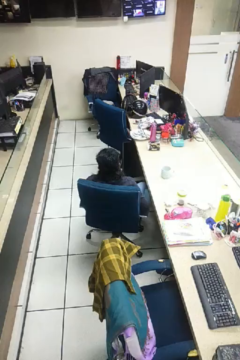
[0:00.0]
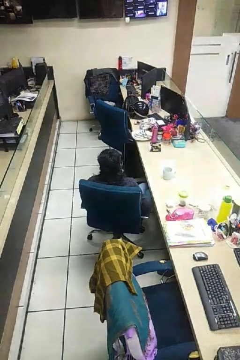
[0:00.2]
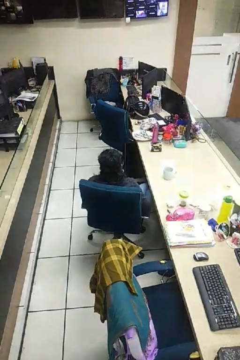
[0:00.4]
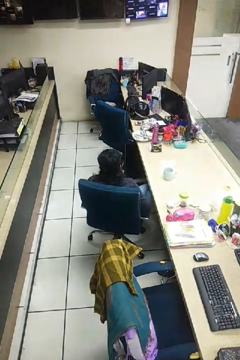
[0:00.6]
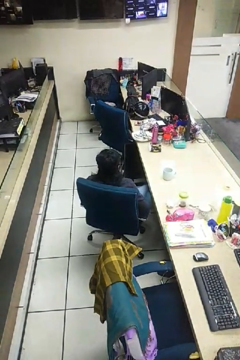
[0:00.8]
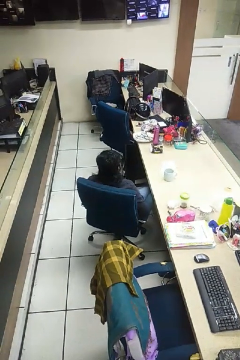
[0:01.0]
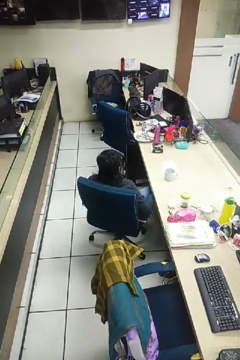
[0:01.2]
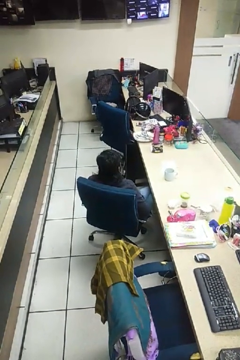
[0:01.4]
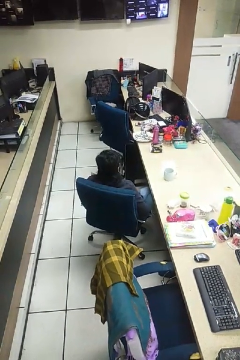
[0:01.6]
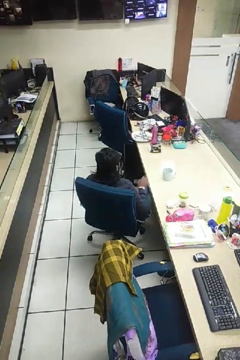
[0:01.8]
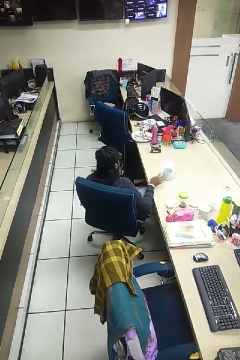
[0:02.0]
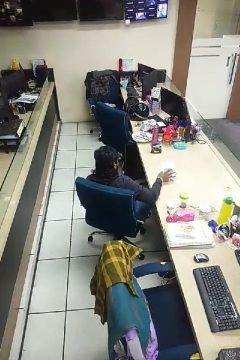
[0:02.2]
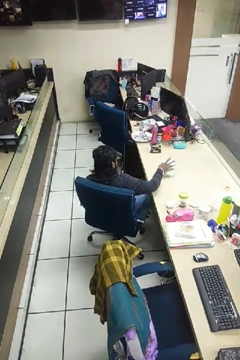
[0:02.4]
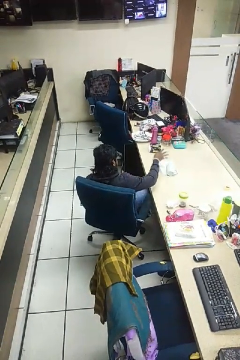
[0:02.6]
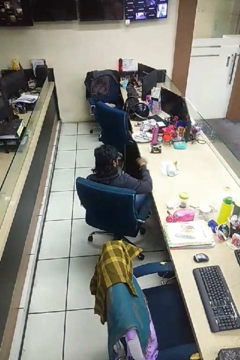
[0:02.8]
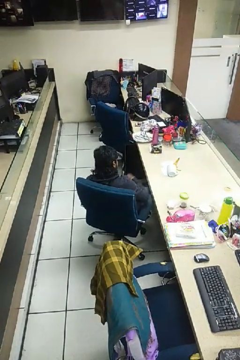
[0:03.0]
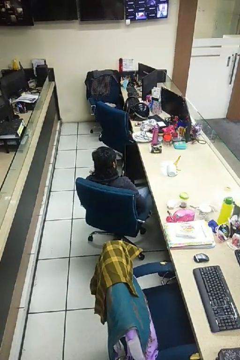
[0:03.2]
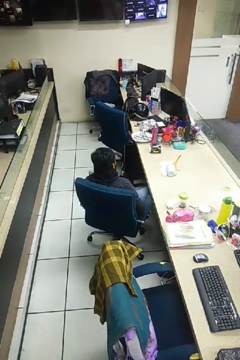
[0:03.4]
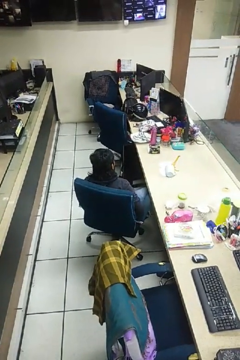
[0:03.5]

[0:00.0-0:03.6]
person spills on table

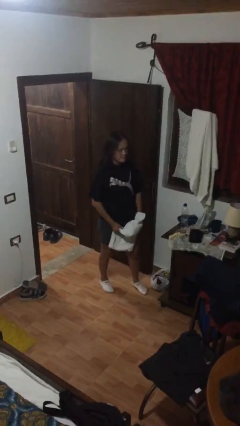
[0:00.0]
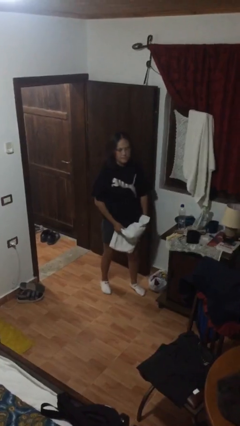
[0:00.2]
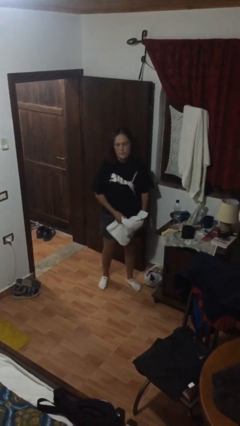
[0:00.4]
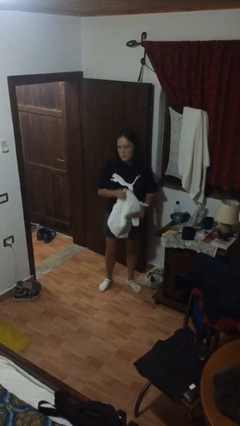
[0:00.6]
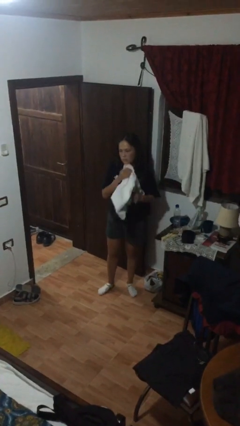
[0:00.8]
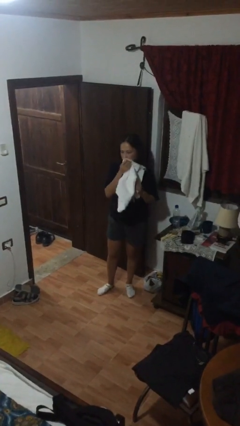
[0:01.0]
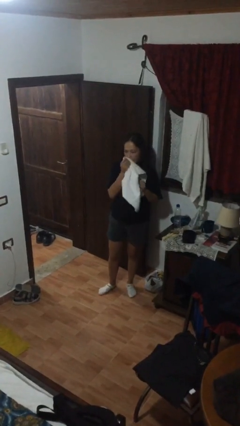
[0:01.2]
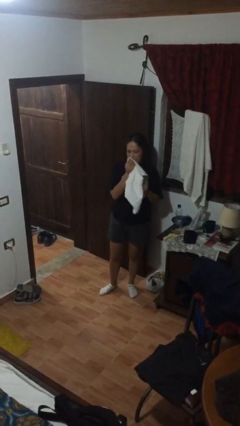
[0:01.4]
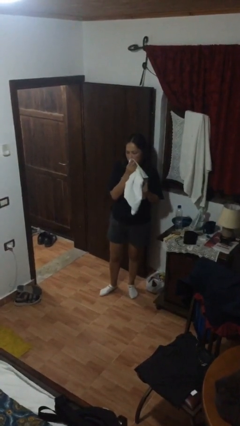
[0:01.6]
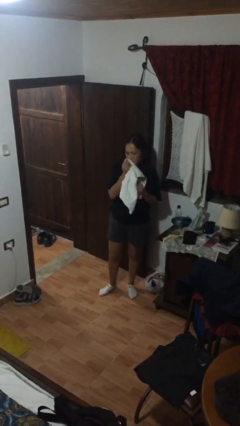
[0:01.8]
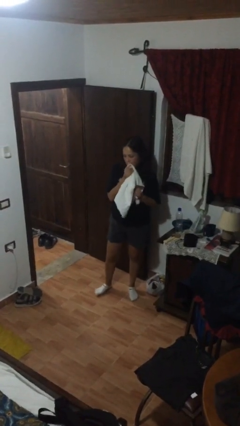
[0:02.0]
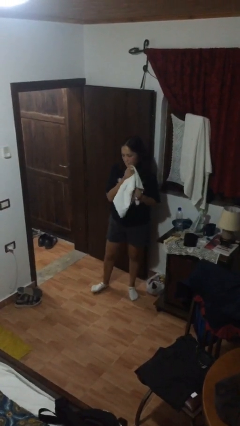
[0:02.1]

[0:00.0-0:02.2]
person wipes mouth with napkin

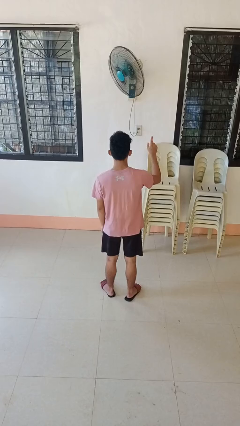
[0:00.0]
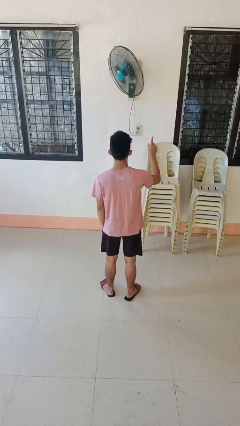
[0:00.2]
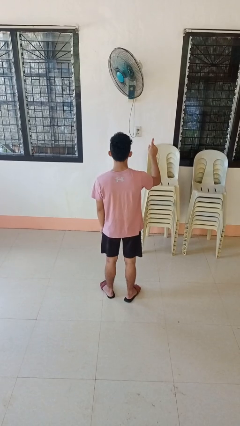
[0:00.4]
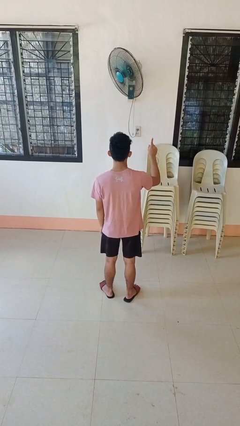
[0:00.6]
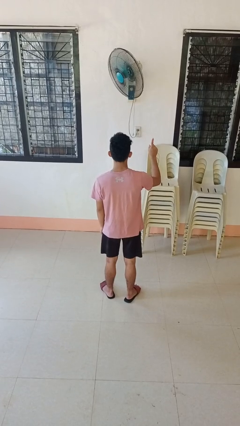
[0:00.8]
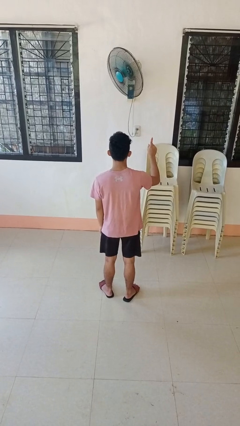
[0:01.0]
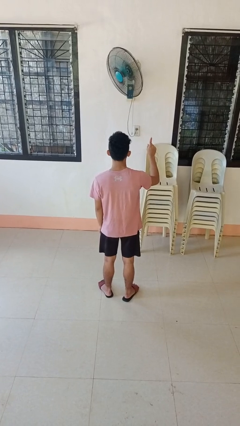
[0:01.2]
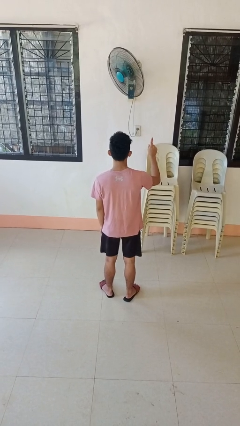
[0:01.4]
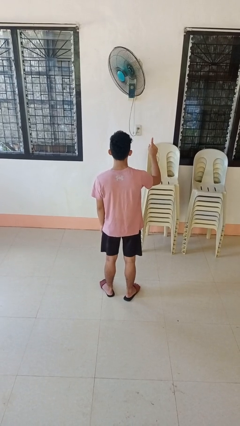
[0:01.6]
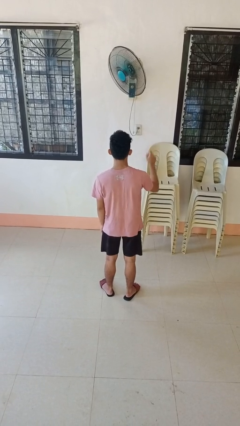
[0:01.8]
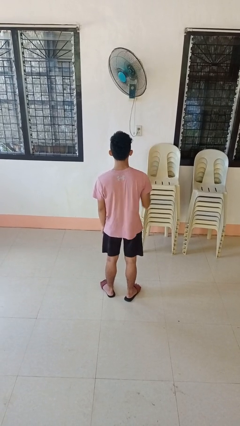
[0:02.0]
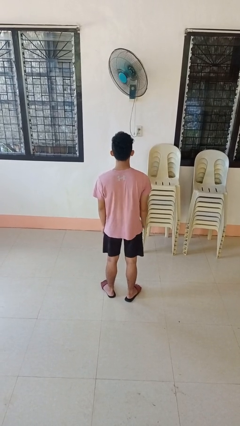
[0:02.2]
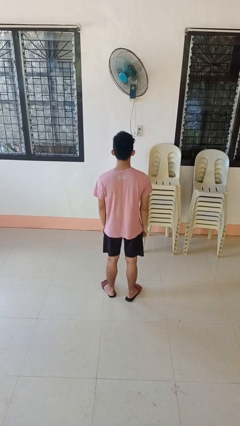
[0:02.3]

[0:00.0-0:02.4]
person gestures number one

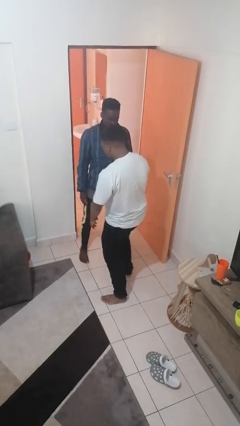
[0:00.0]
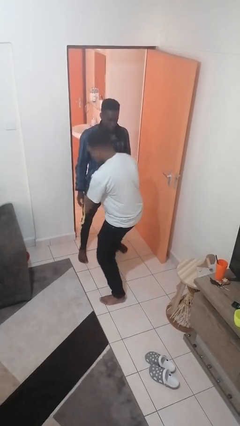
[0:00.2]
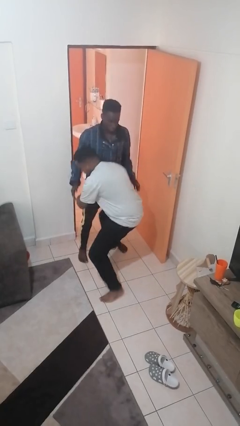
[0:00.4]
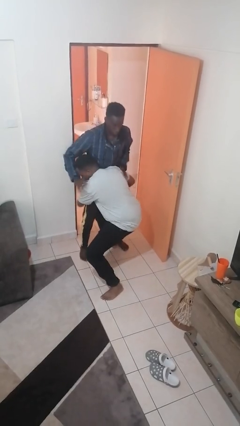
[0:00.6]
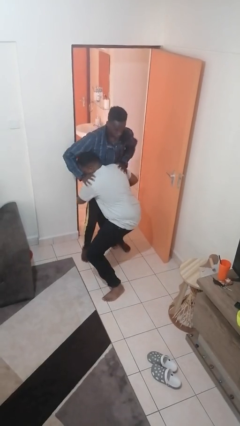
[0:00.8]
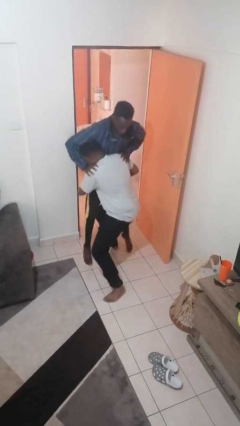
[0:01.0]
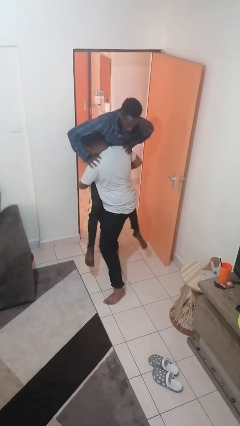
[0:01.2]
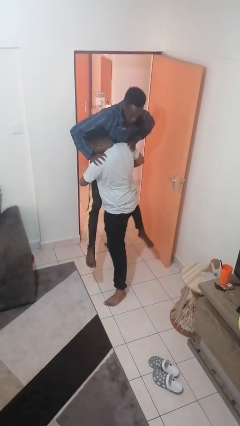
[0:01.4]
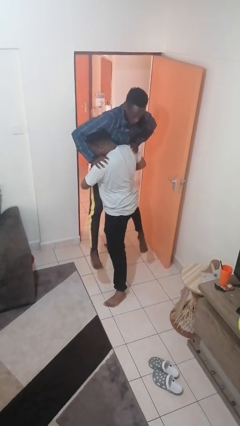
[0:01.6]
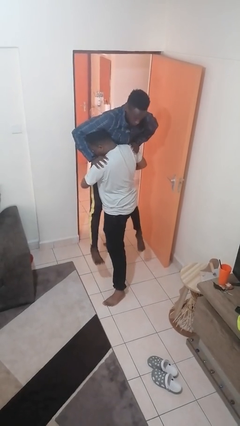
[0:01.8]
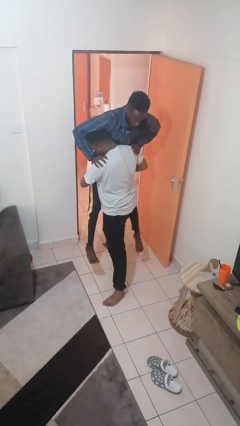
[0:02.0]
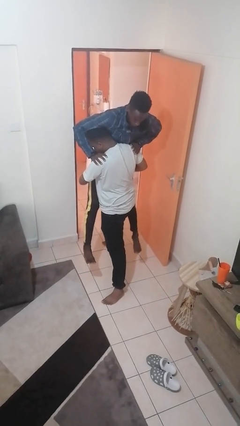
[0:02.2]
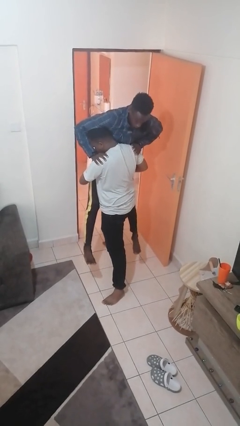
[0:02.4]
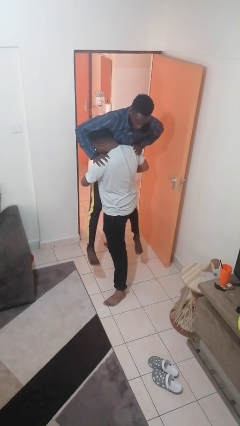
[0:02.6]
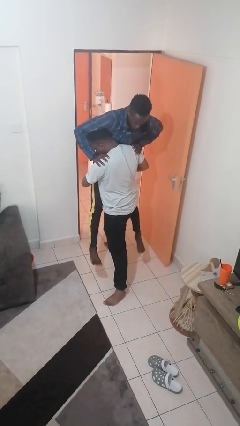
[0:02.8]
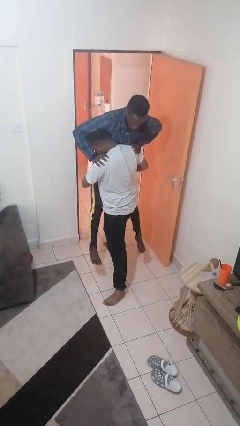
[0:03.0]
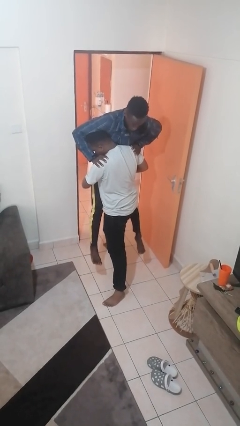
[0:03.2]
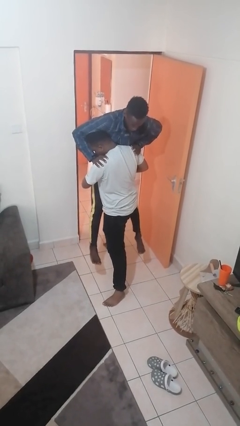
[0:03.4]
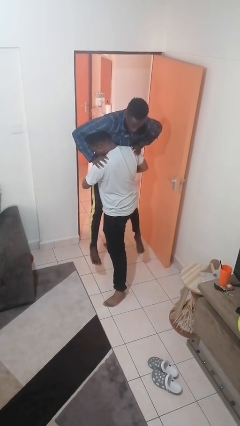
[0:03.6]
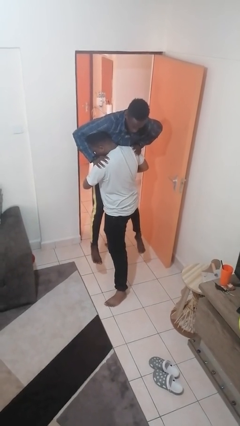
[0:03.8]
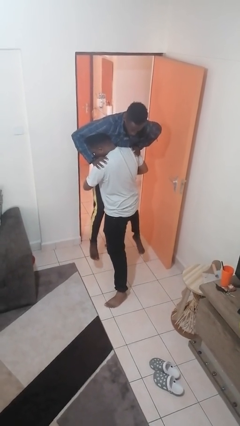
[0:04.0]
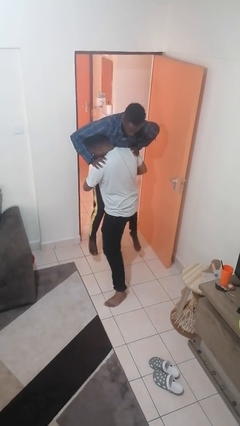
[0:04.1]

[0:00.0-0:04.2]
person picks up person

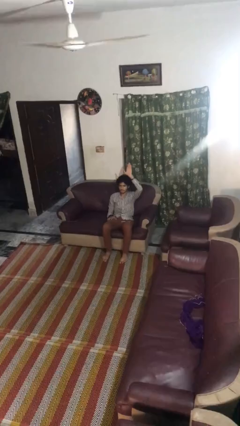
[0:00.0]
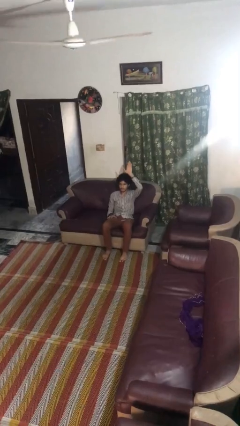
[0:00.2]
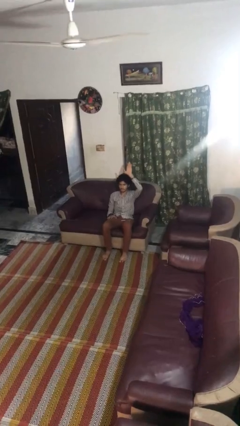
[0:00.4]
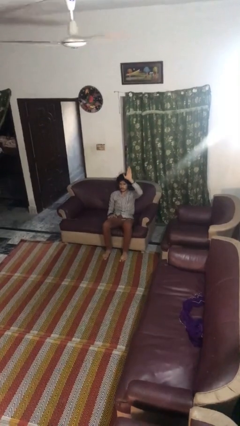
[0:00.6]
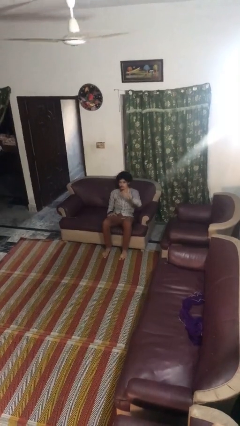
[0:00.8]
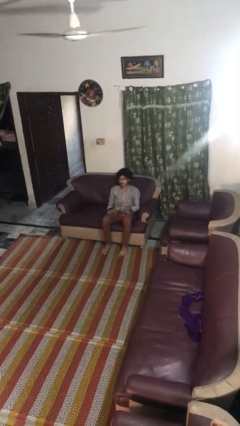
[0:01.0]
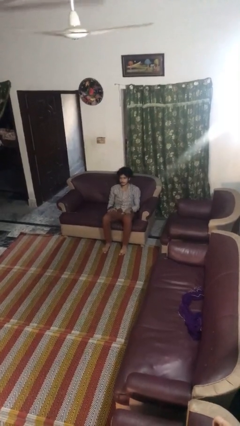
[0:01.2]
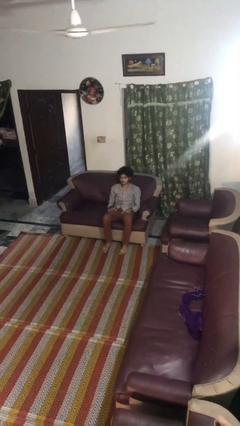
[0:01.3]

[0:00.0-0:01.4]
person gestures lower hand

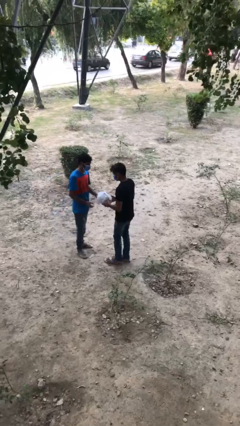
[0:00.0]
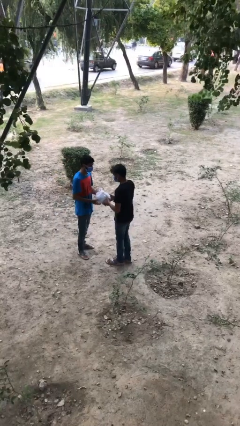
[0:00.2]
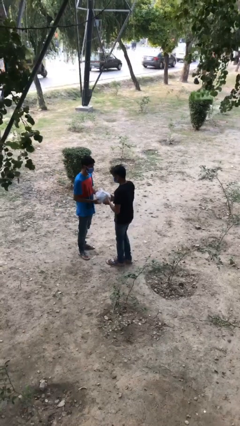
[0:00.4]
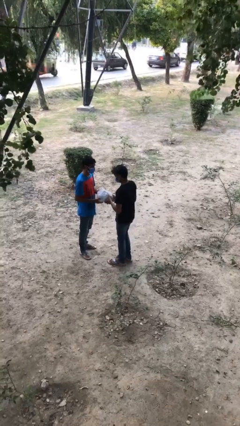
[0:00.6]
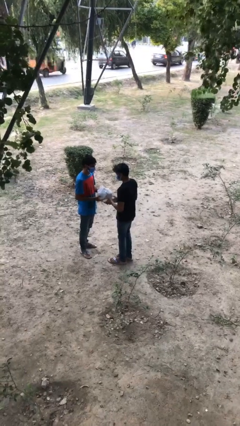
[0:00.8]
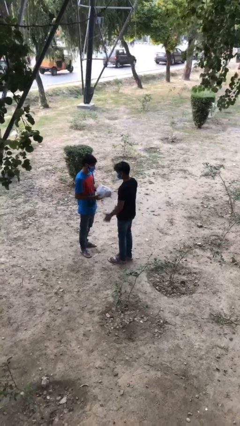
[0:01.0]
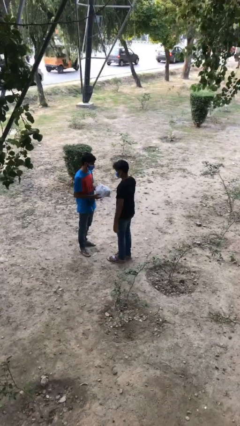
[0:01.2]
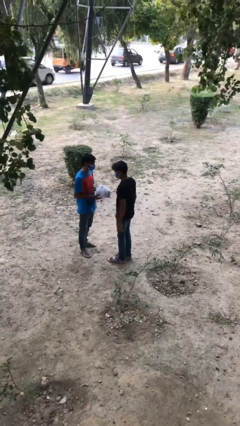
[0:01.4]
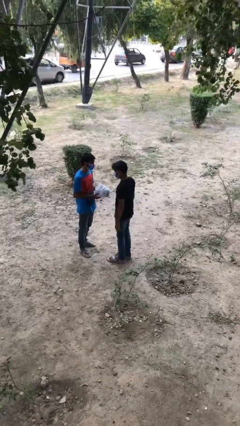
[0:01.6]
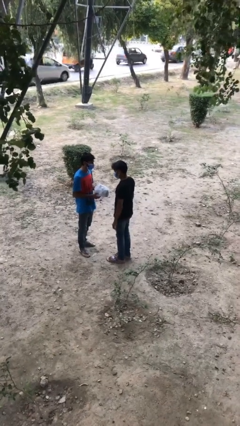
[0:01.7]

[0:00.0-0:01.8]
person transfers object to person

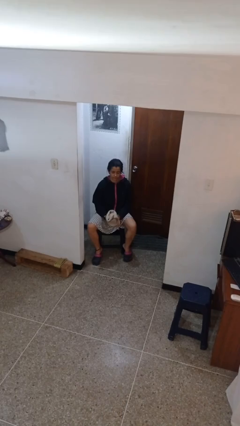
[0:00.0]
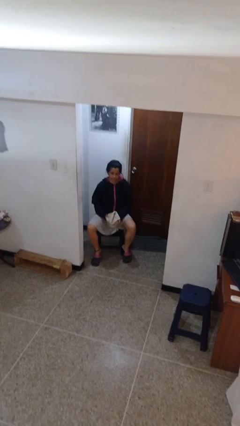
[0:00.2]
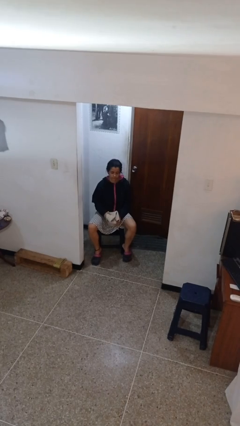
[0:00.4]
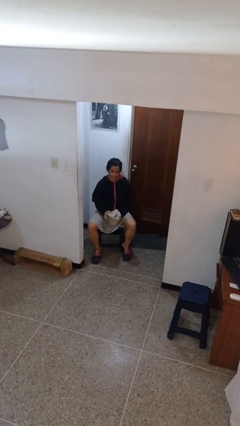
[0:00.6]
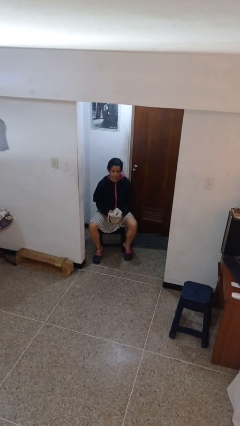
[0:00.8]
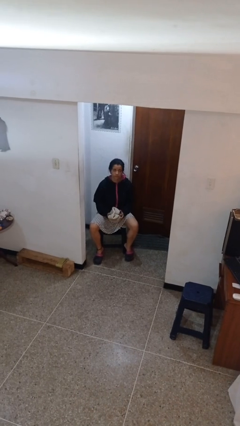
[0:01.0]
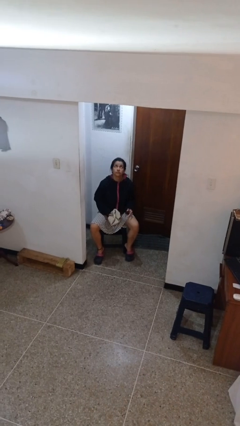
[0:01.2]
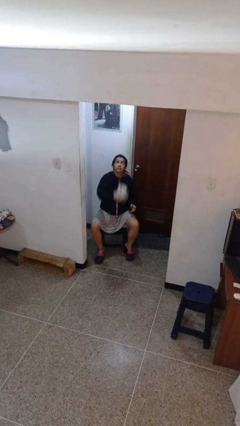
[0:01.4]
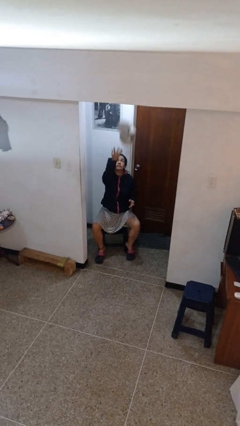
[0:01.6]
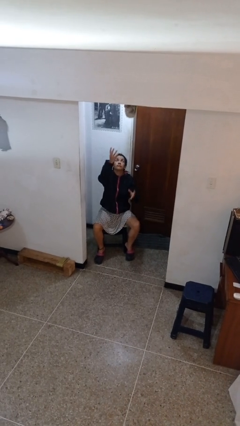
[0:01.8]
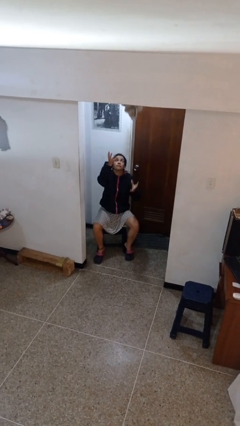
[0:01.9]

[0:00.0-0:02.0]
person drops object
